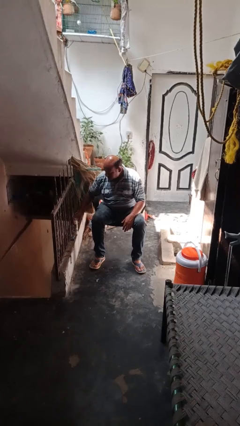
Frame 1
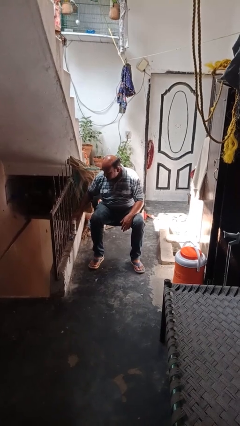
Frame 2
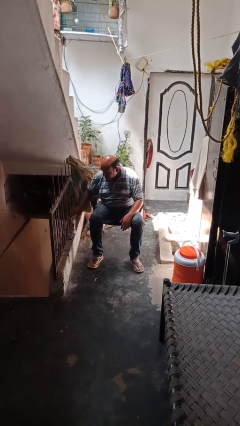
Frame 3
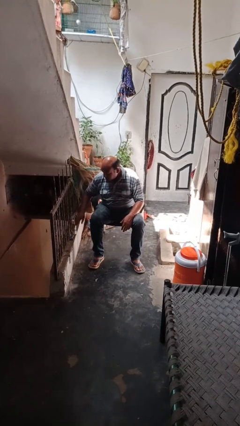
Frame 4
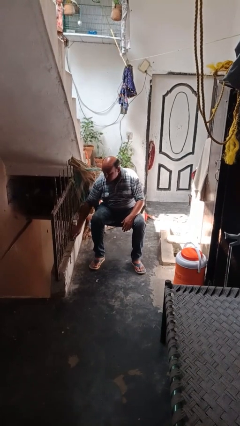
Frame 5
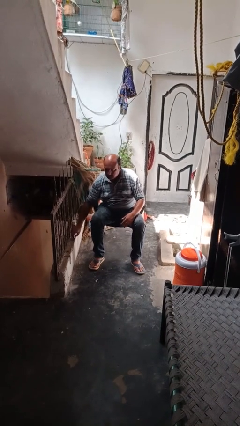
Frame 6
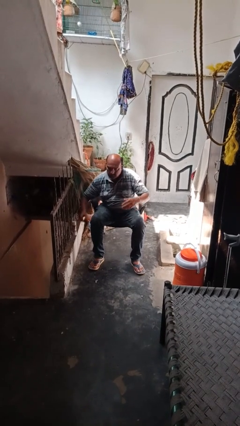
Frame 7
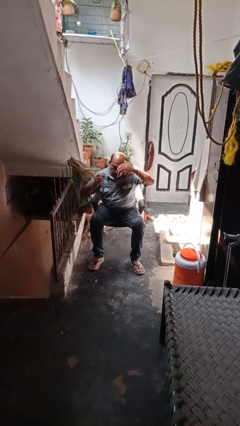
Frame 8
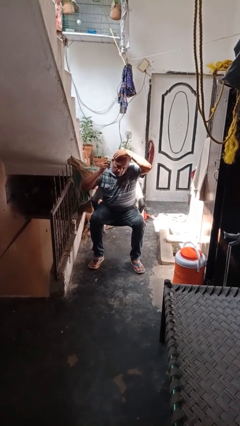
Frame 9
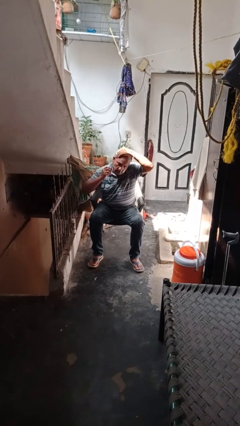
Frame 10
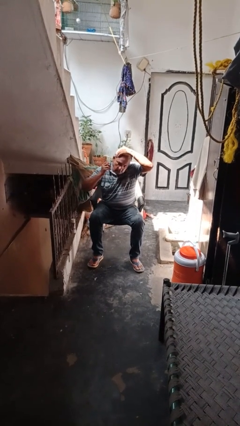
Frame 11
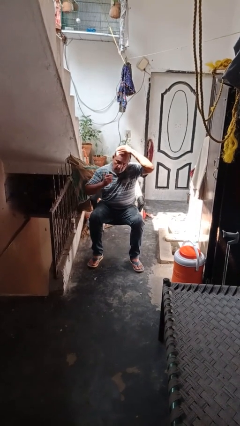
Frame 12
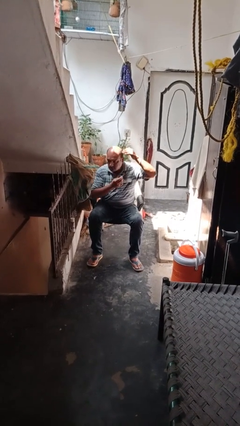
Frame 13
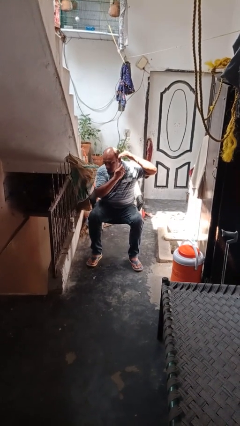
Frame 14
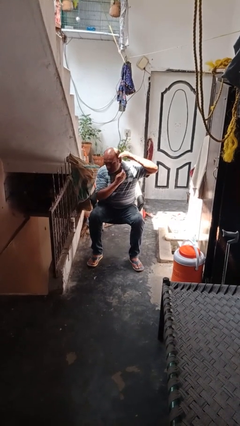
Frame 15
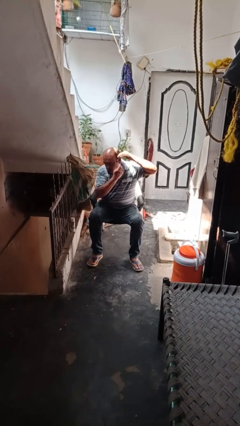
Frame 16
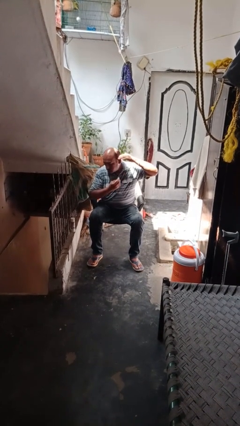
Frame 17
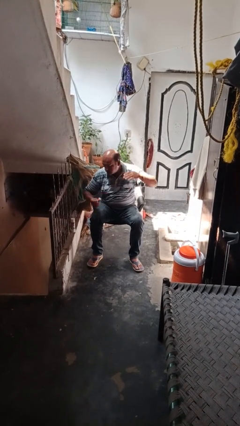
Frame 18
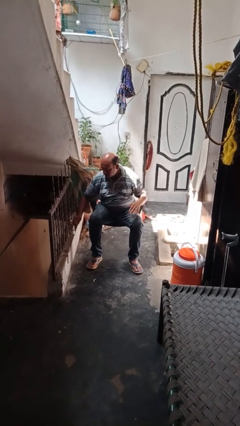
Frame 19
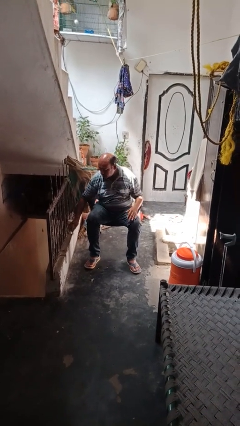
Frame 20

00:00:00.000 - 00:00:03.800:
person shaves face

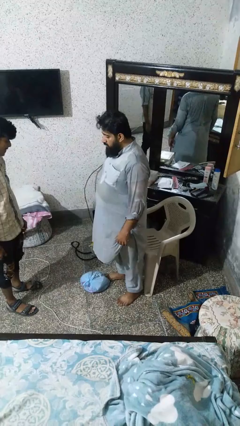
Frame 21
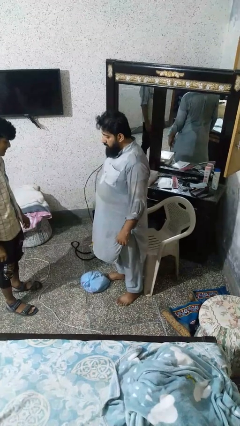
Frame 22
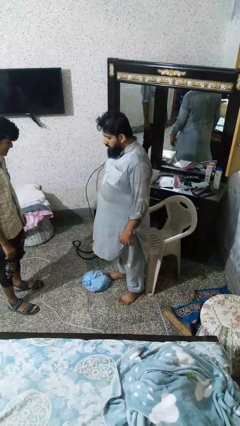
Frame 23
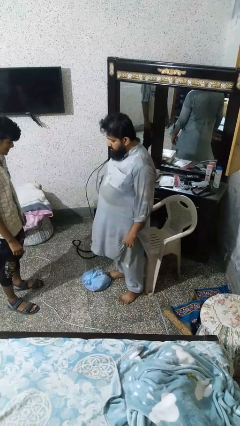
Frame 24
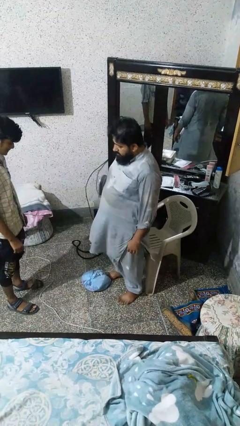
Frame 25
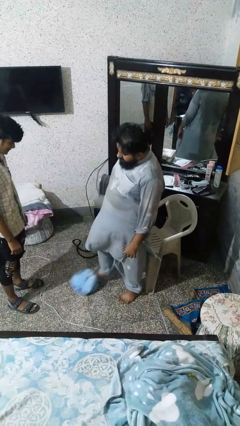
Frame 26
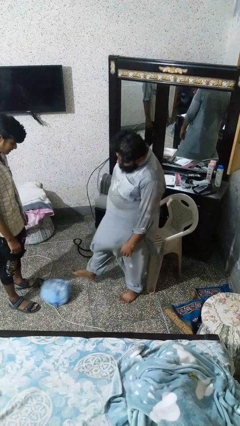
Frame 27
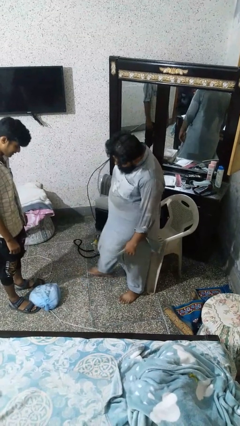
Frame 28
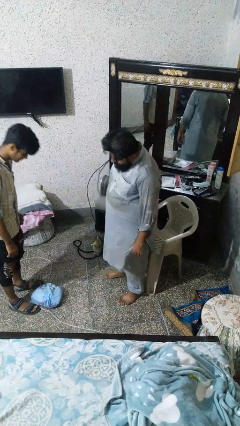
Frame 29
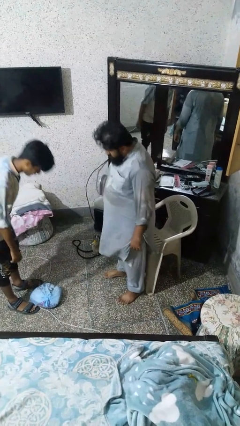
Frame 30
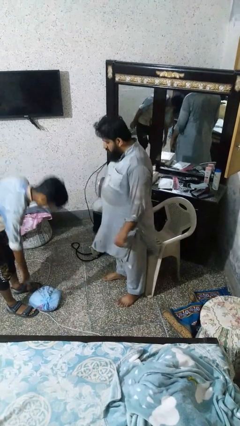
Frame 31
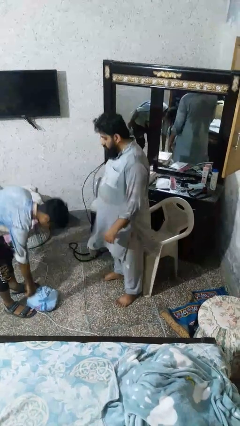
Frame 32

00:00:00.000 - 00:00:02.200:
person kicks object to person

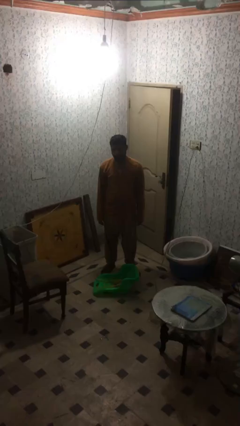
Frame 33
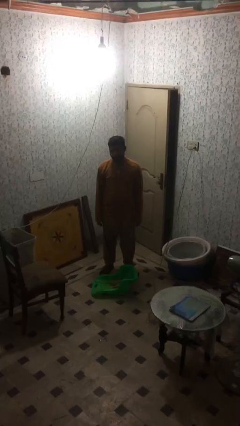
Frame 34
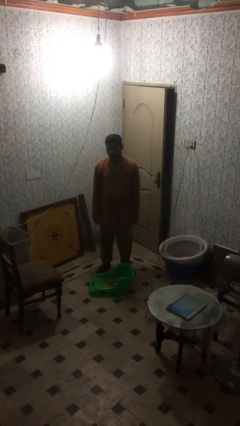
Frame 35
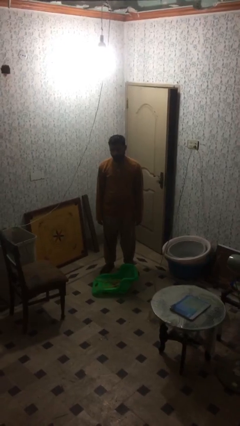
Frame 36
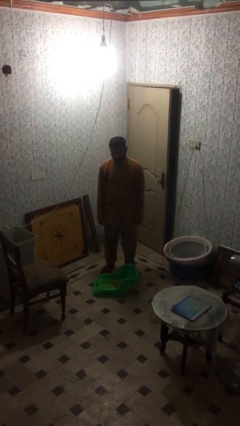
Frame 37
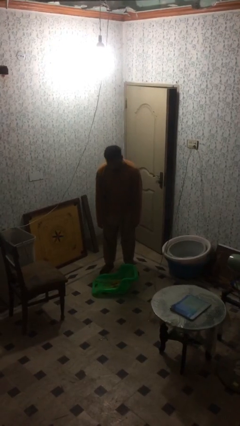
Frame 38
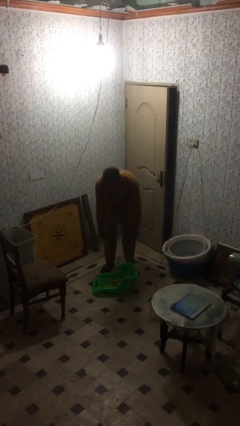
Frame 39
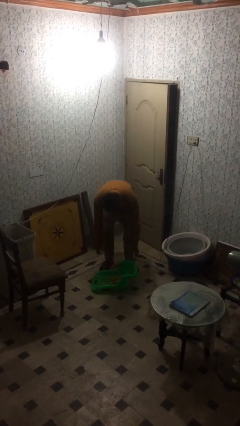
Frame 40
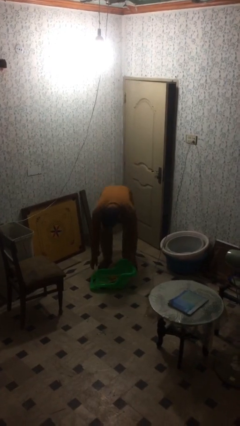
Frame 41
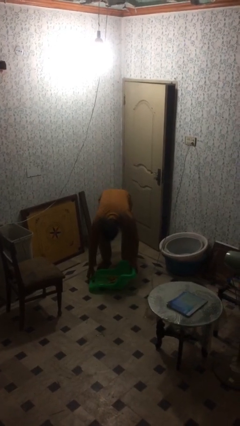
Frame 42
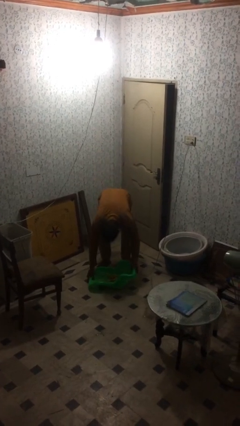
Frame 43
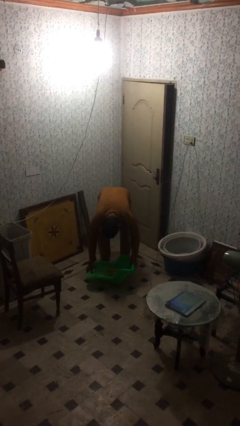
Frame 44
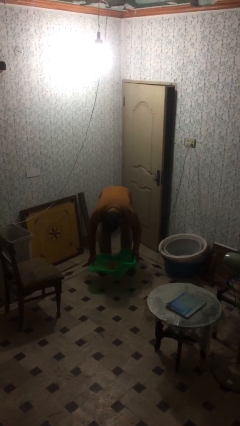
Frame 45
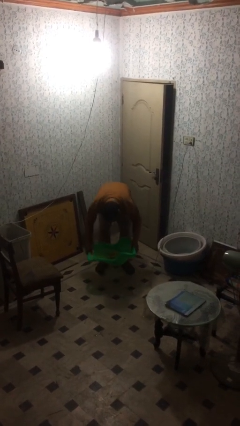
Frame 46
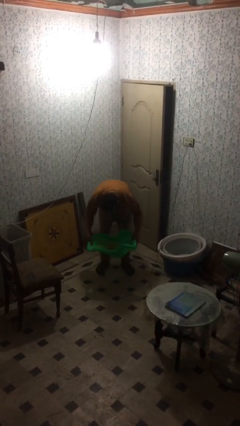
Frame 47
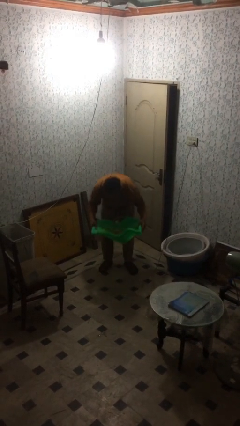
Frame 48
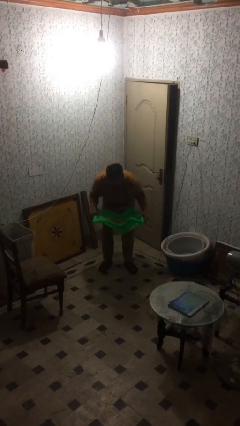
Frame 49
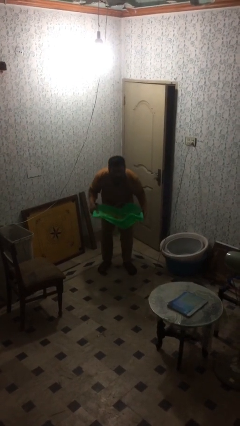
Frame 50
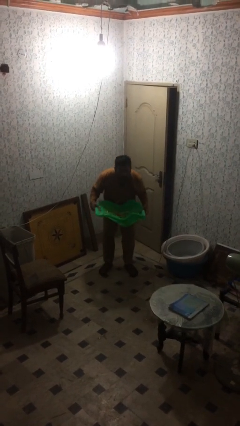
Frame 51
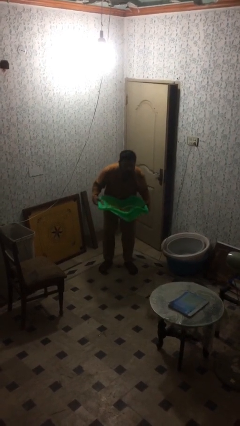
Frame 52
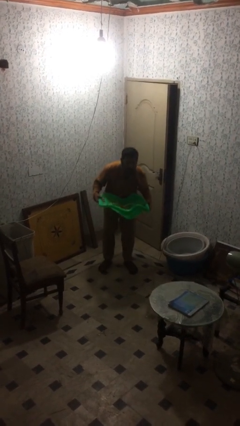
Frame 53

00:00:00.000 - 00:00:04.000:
person picks up object from floor

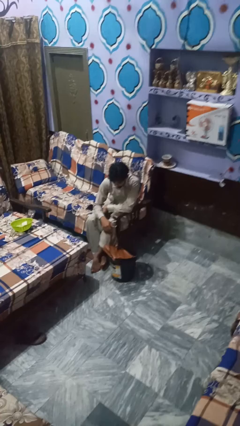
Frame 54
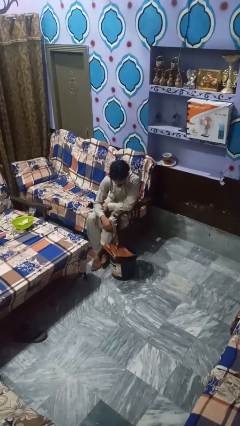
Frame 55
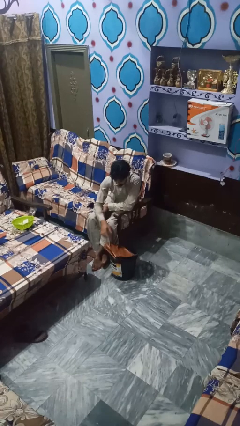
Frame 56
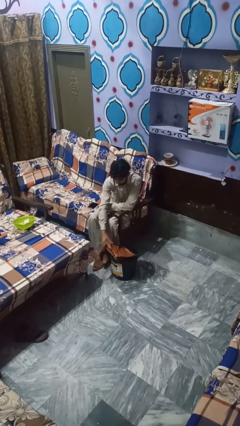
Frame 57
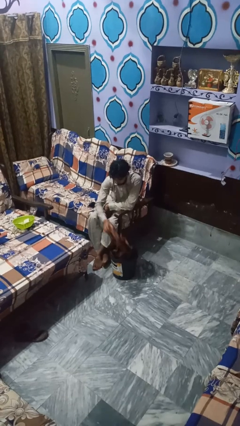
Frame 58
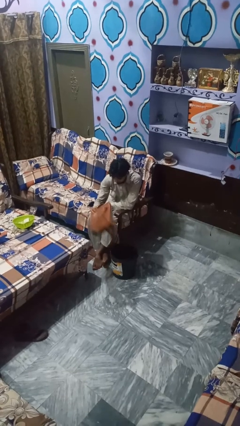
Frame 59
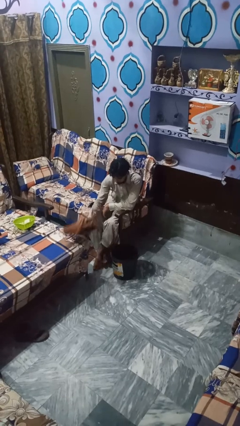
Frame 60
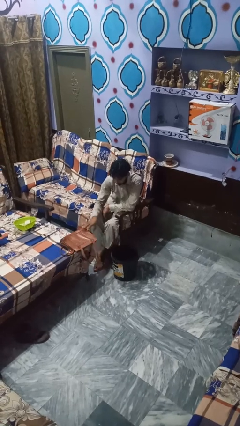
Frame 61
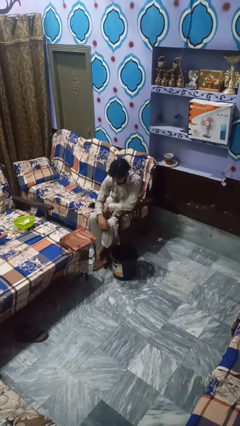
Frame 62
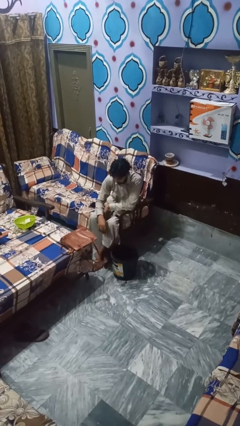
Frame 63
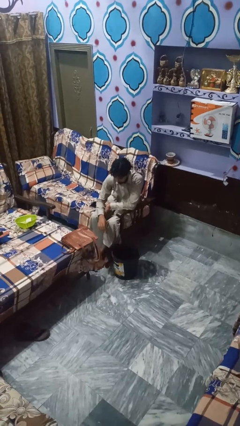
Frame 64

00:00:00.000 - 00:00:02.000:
person takes object from basket

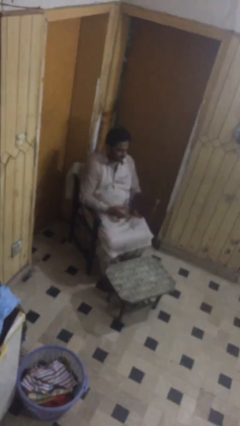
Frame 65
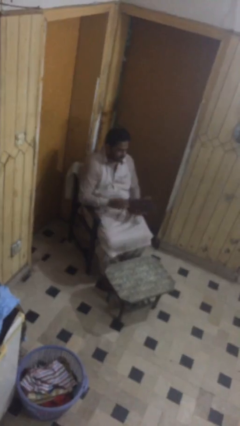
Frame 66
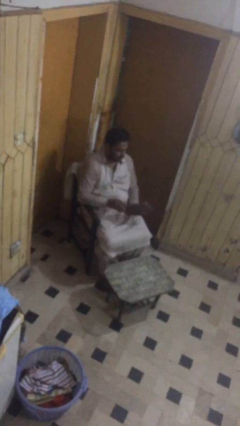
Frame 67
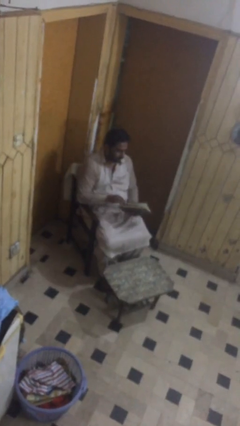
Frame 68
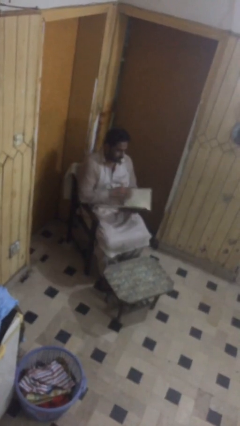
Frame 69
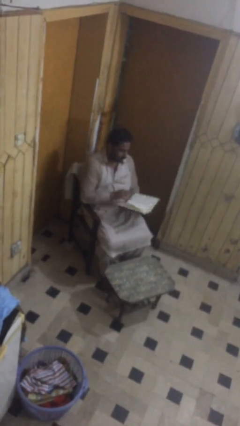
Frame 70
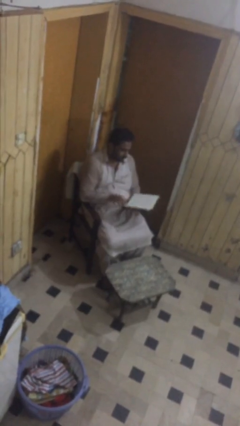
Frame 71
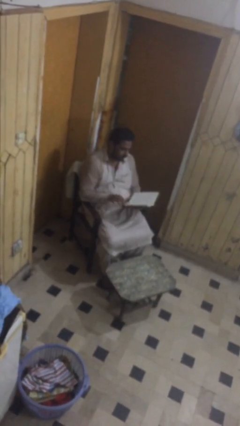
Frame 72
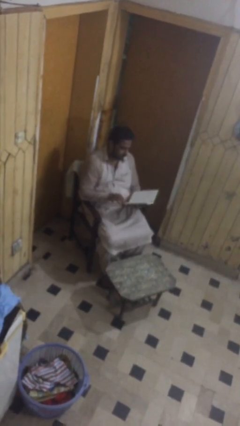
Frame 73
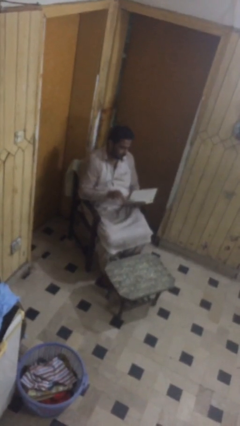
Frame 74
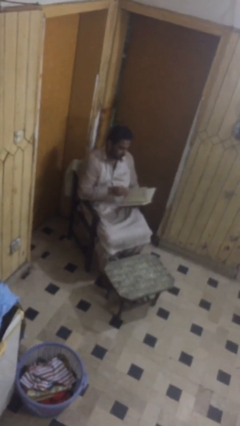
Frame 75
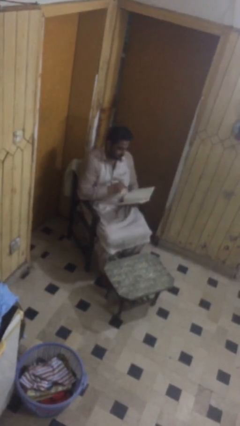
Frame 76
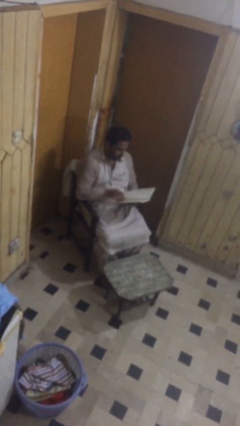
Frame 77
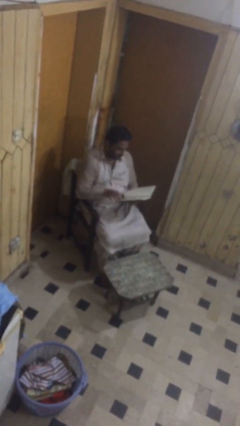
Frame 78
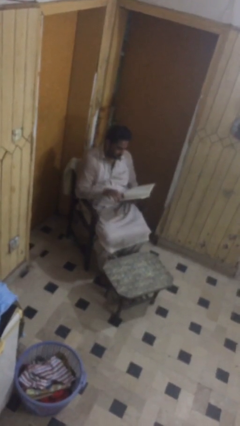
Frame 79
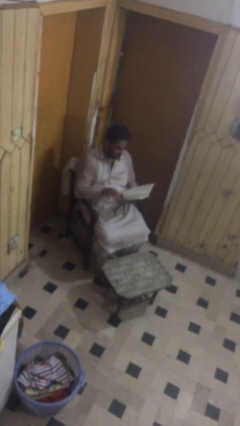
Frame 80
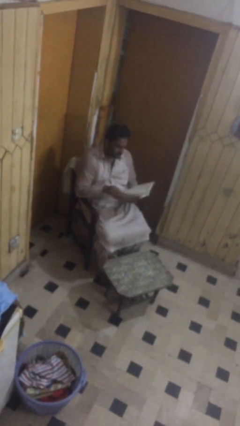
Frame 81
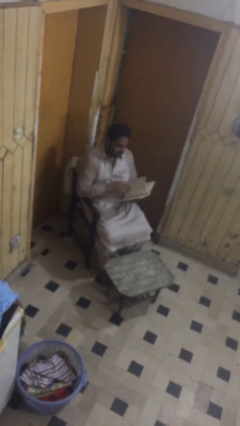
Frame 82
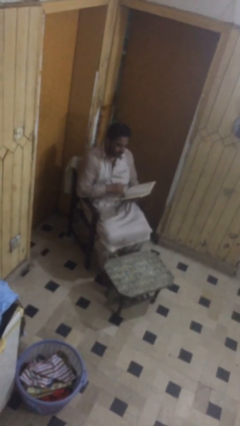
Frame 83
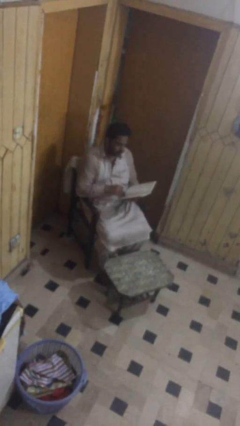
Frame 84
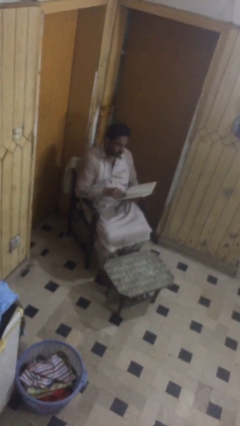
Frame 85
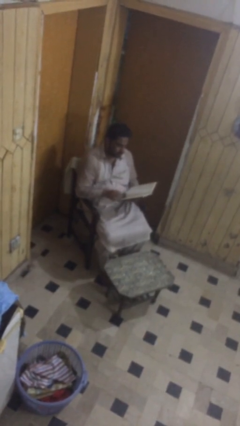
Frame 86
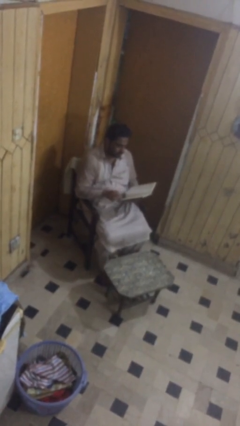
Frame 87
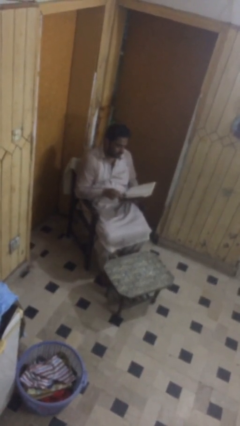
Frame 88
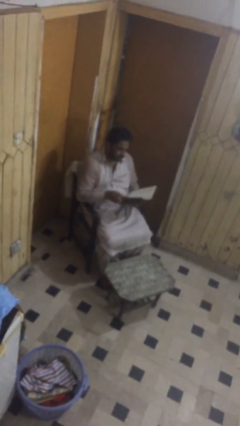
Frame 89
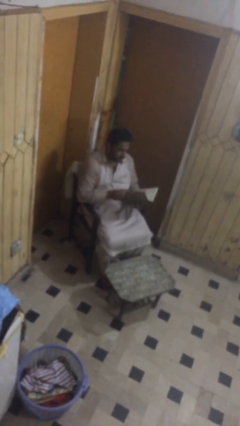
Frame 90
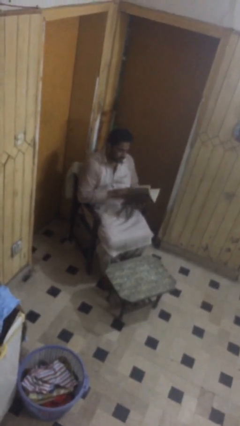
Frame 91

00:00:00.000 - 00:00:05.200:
person reads document

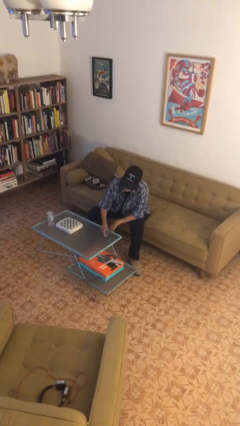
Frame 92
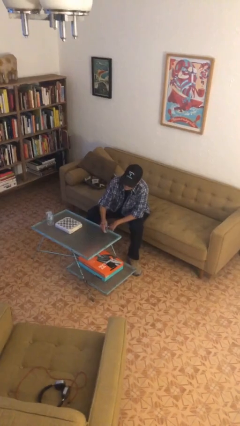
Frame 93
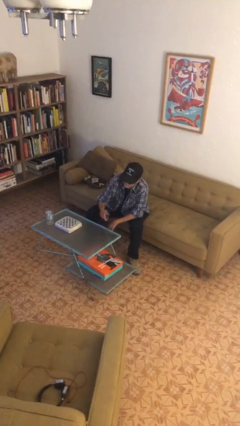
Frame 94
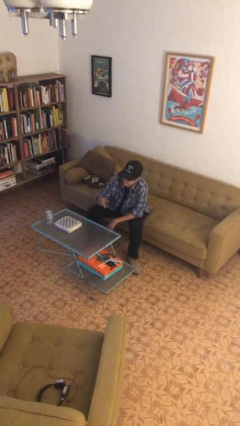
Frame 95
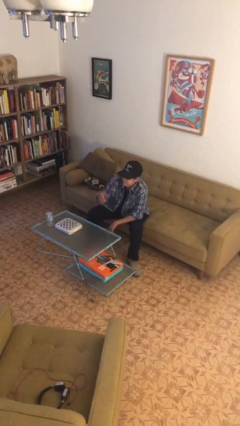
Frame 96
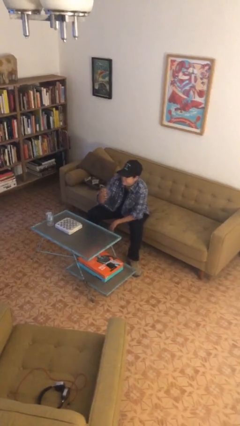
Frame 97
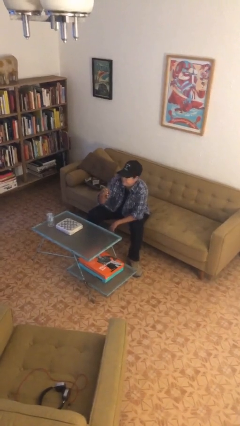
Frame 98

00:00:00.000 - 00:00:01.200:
person picks up object from table
